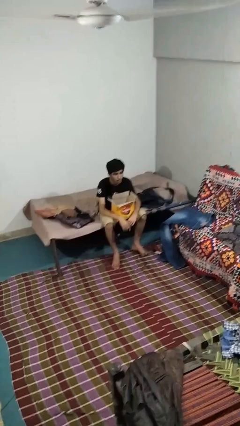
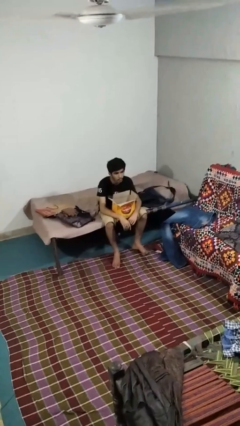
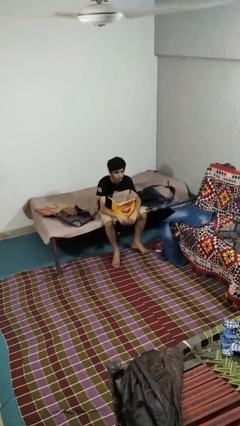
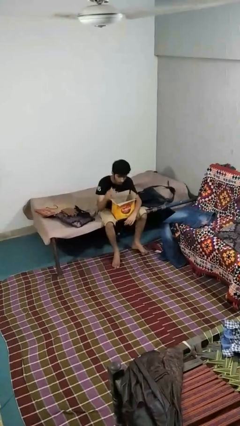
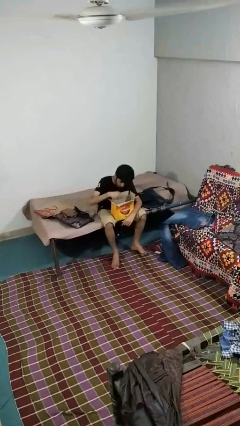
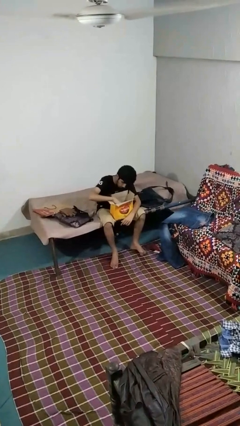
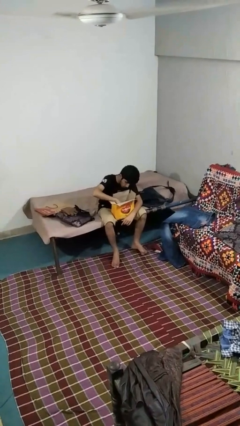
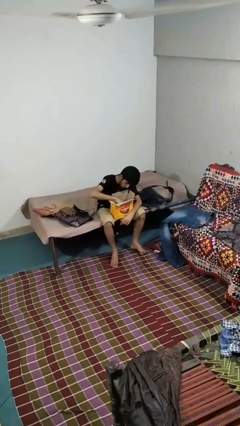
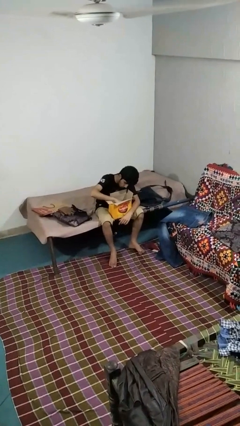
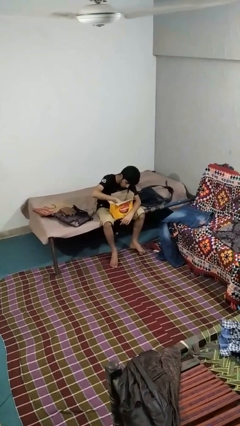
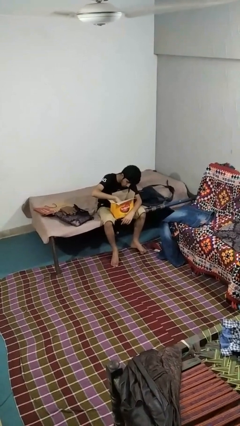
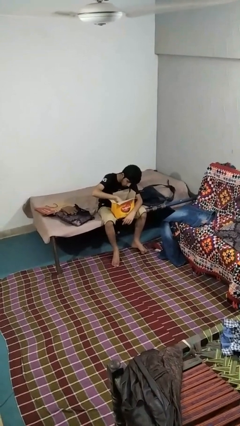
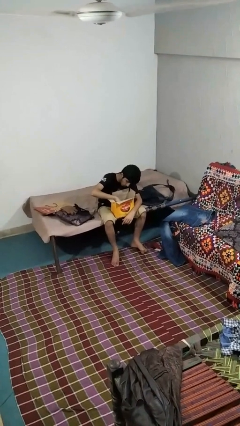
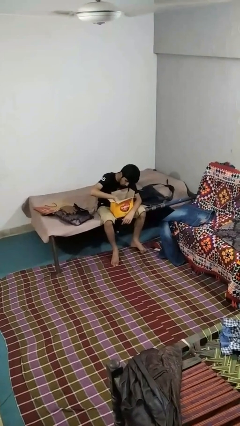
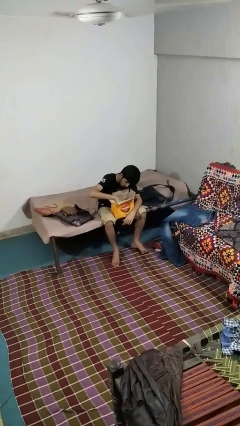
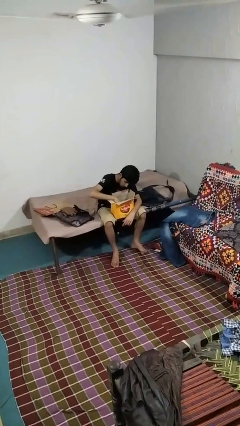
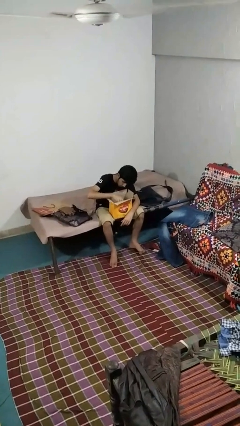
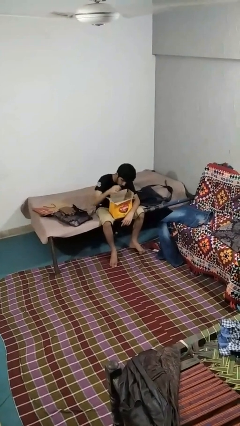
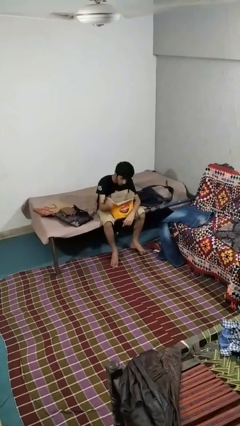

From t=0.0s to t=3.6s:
person searches in box

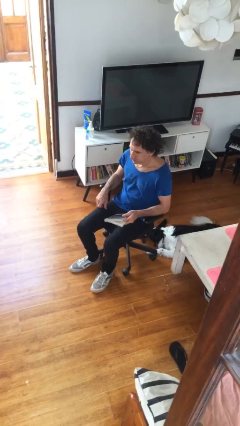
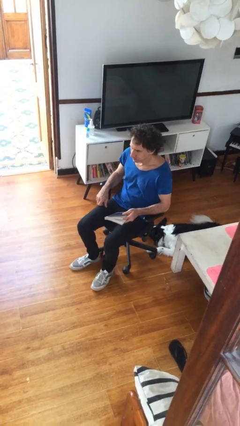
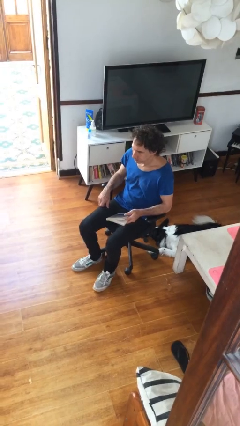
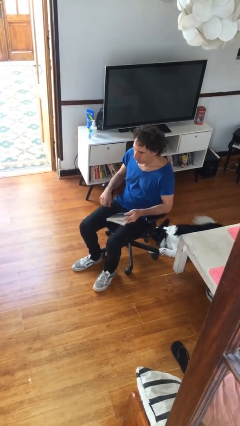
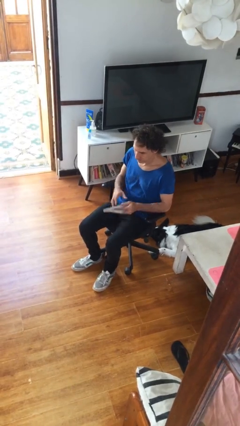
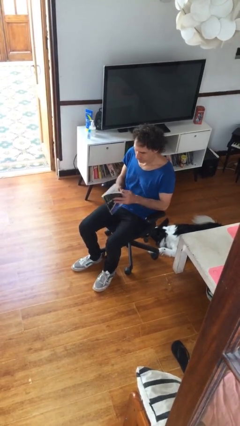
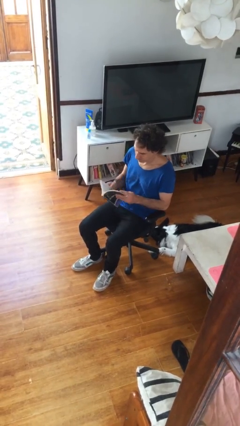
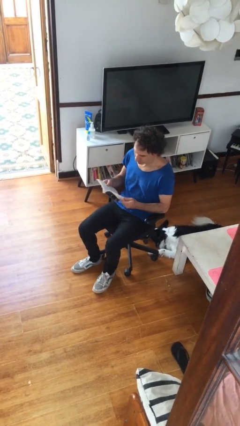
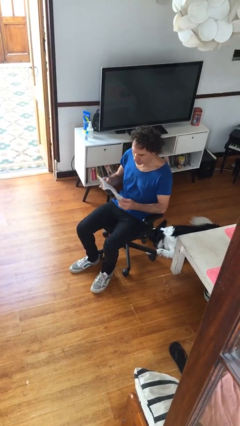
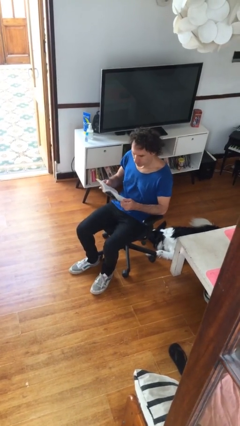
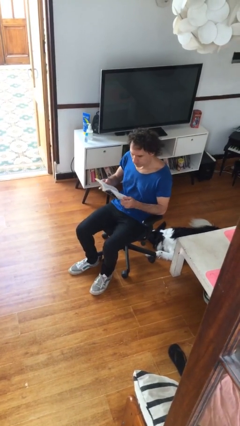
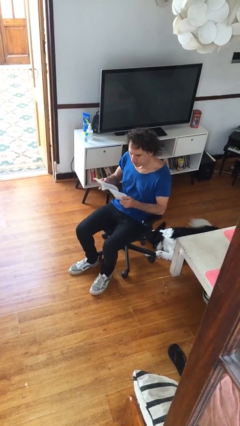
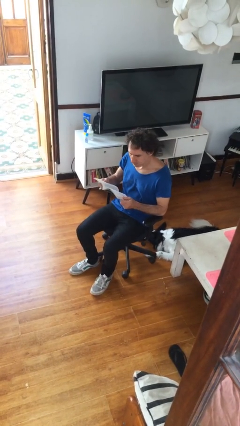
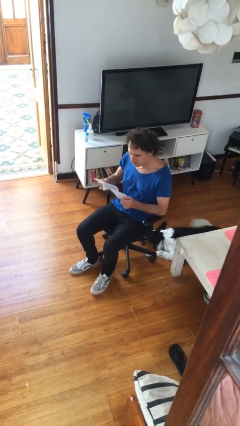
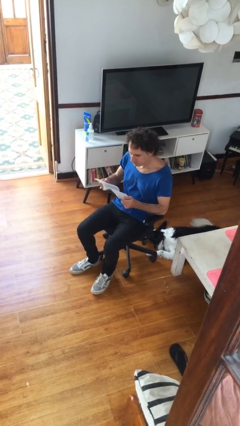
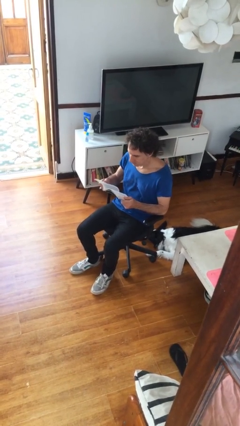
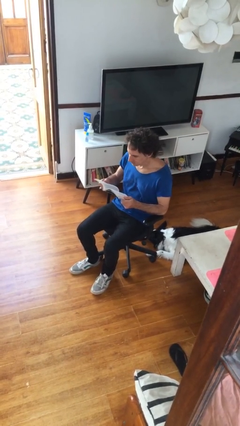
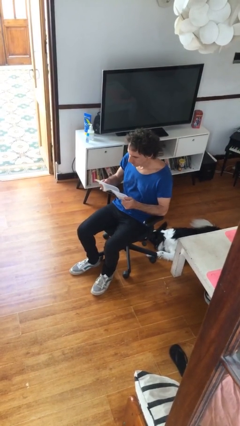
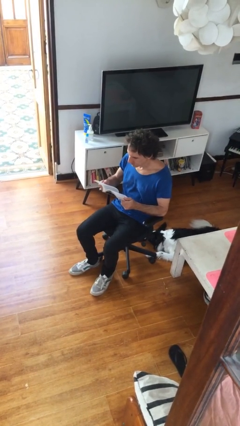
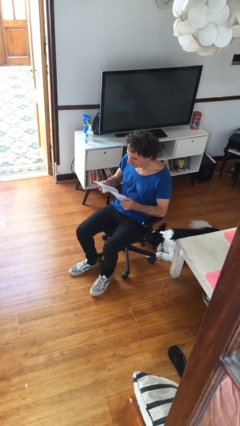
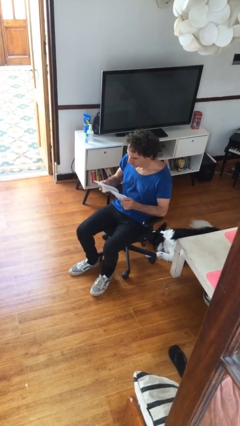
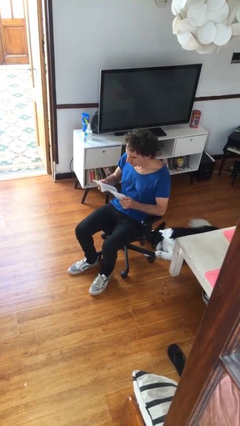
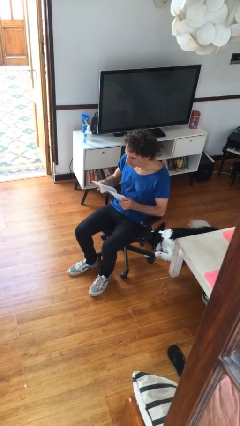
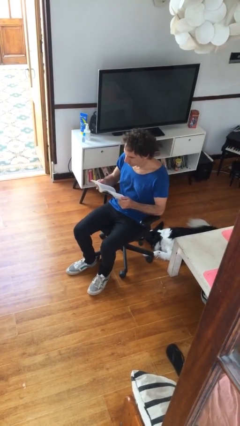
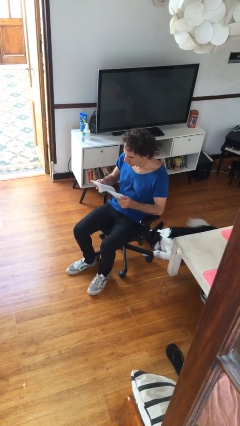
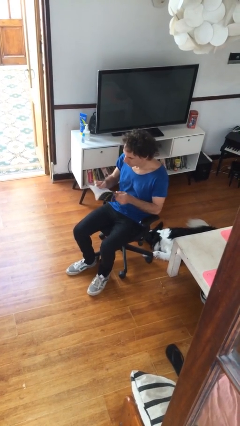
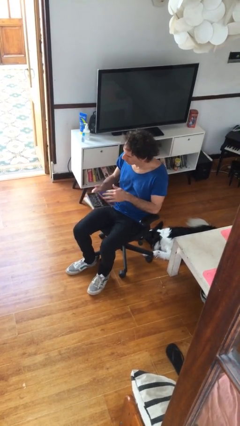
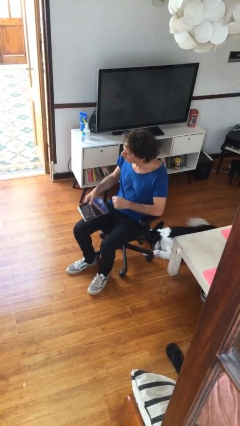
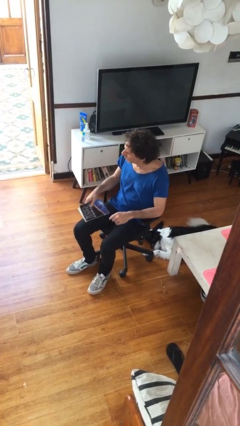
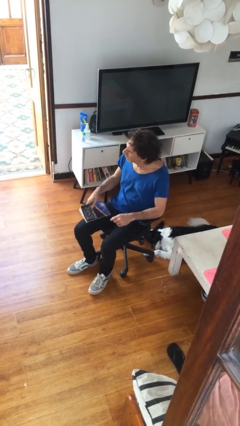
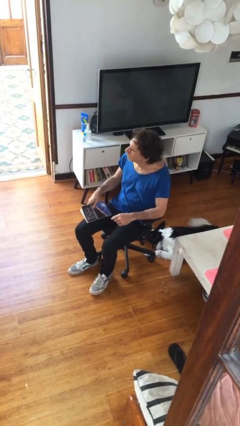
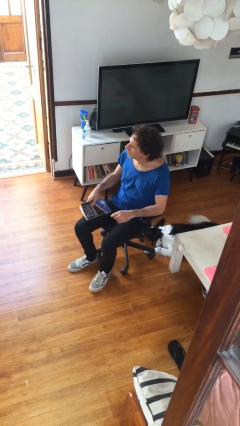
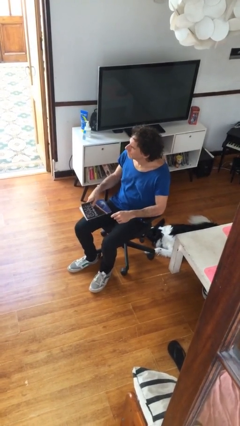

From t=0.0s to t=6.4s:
person reads document

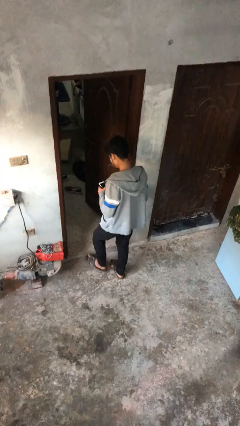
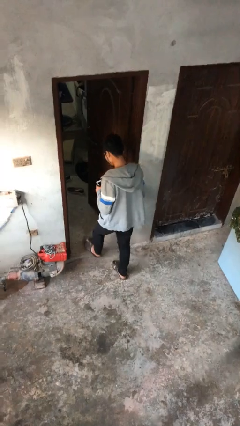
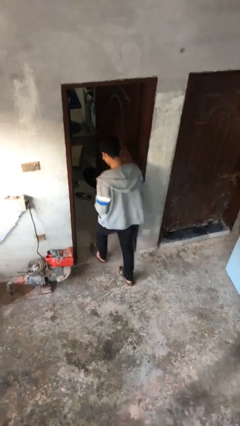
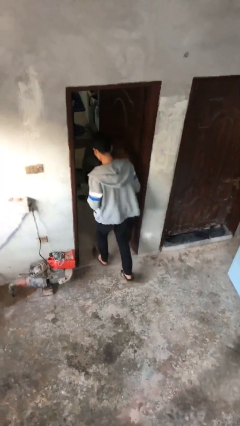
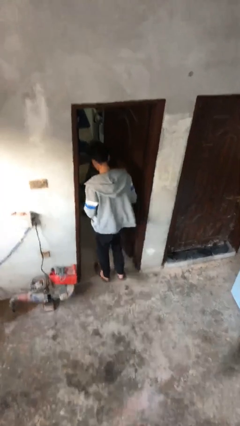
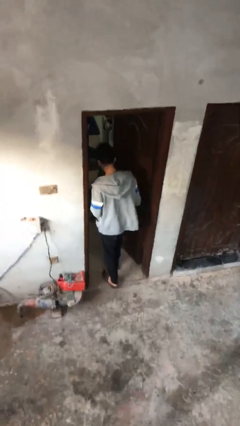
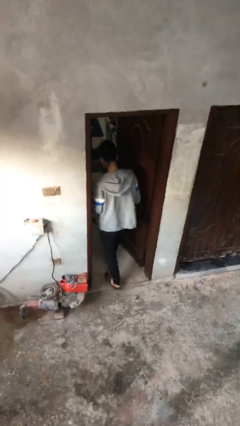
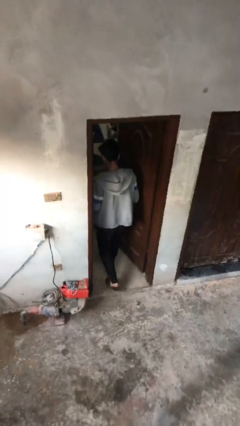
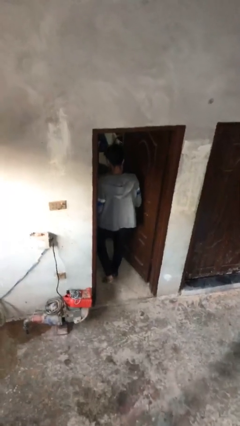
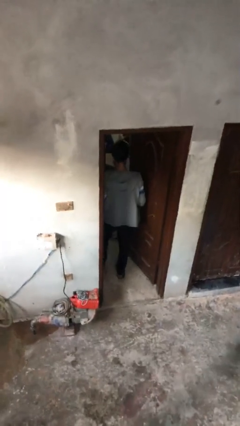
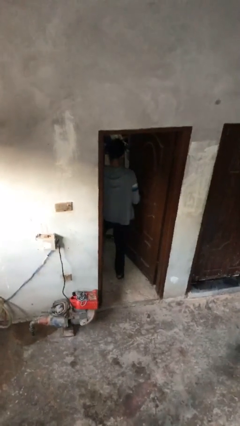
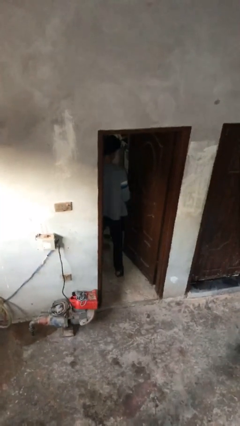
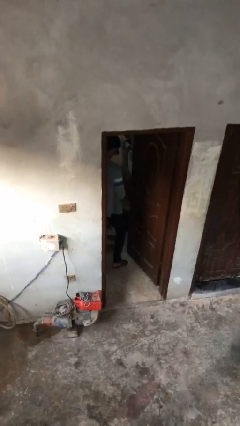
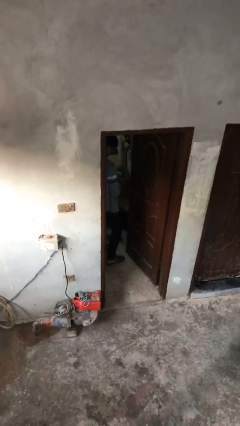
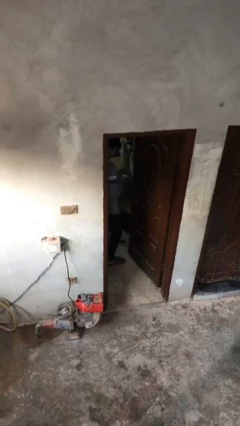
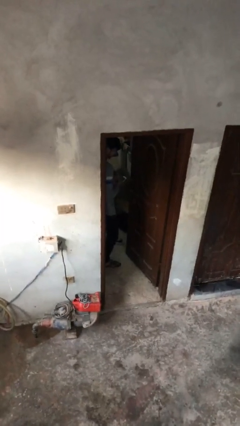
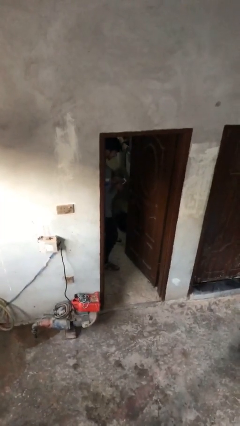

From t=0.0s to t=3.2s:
person enters scene through structure

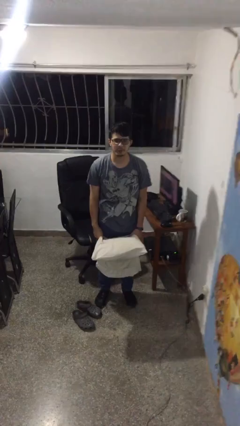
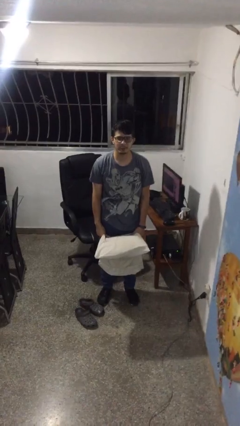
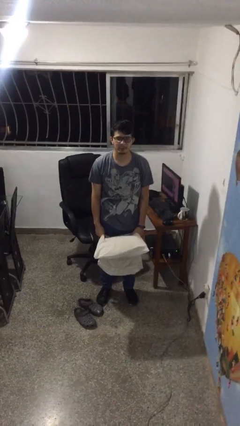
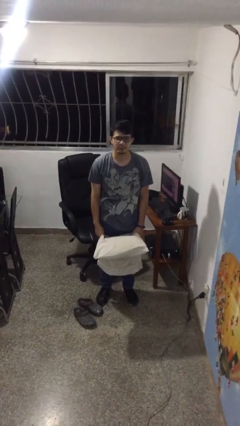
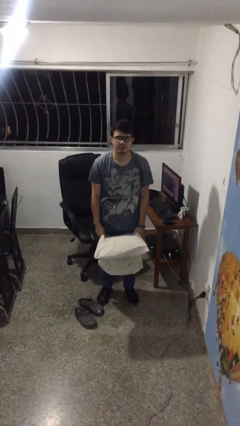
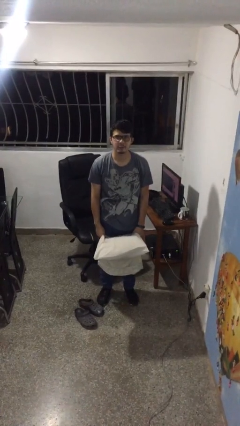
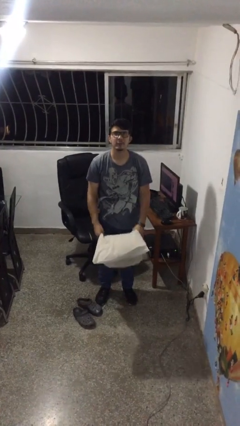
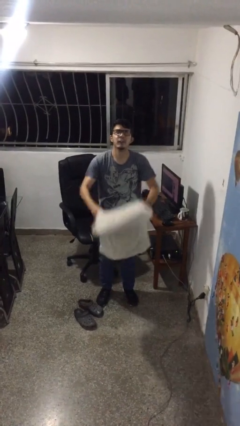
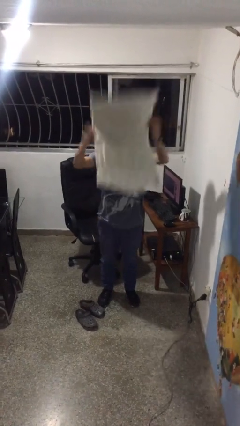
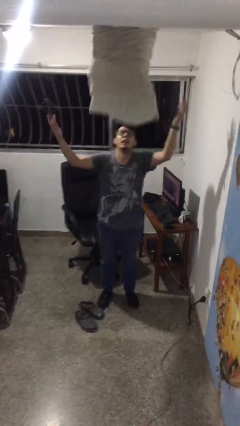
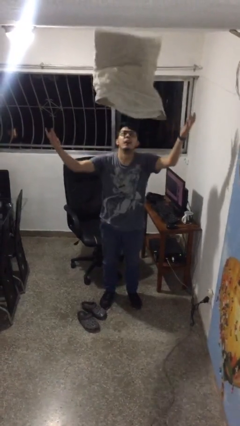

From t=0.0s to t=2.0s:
person drops object

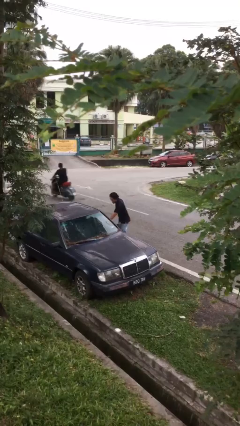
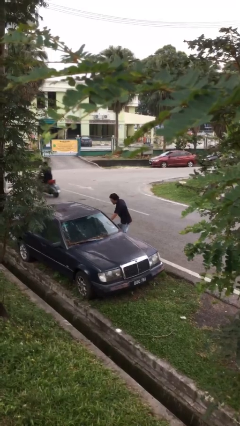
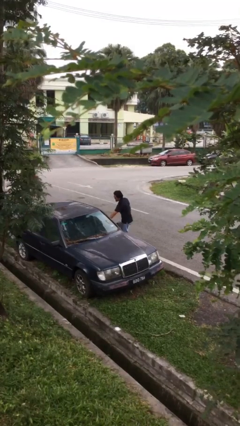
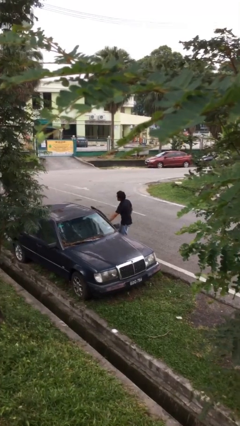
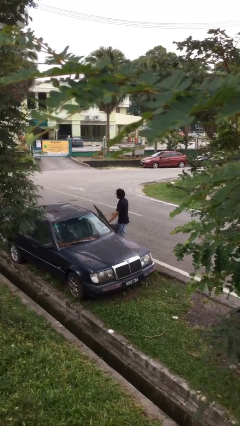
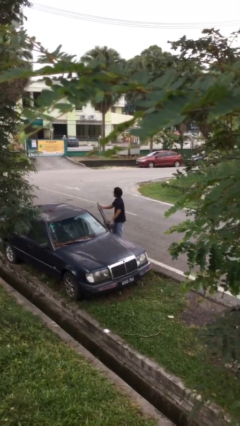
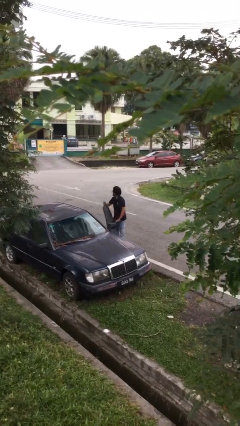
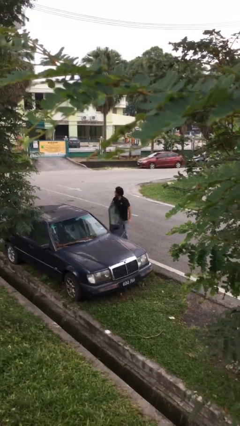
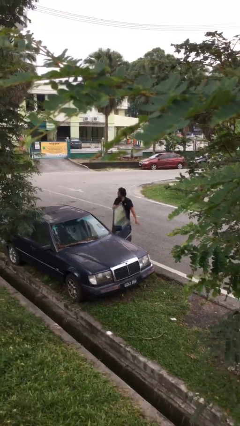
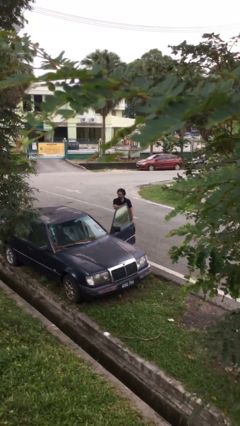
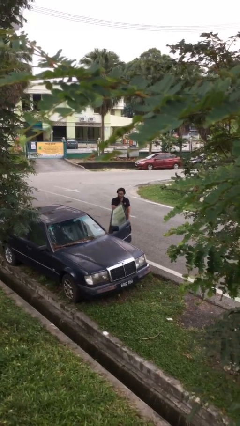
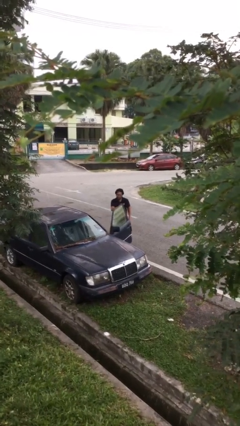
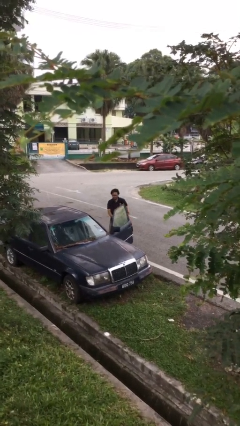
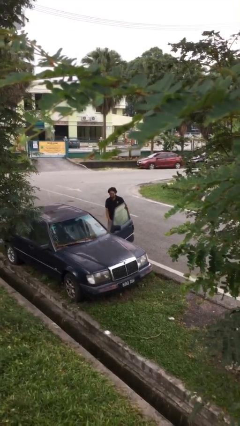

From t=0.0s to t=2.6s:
person opens car door
